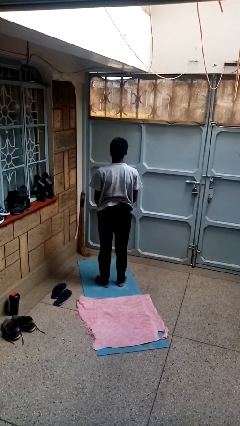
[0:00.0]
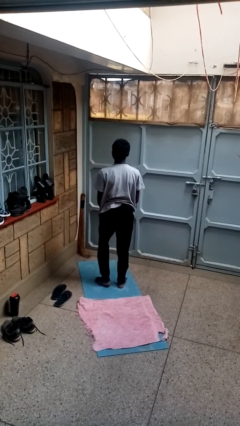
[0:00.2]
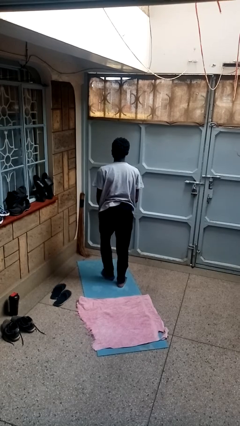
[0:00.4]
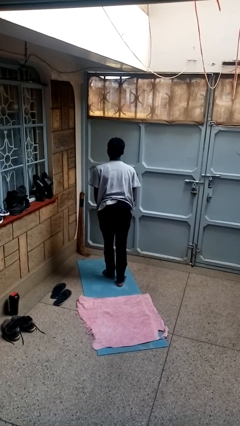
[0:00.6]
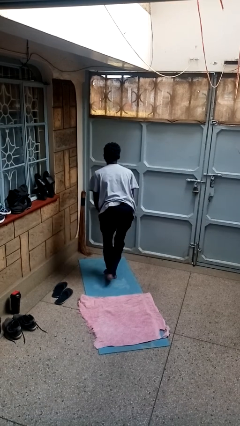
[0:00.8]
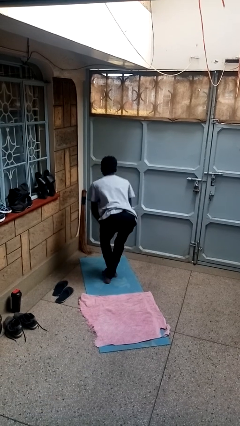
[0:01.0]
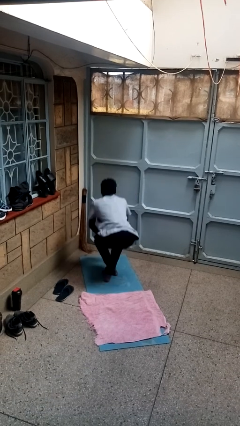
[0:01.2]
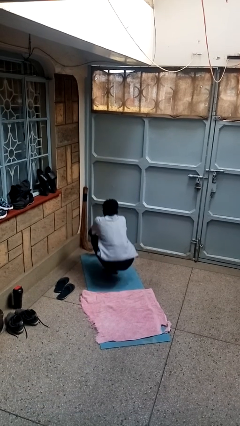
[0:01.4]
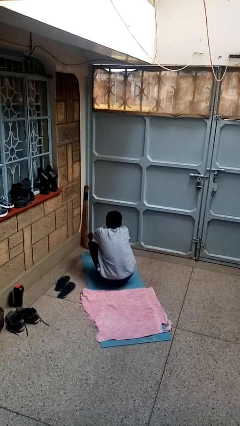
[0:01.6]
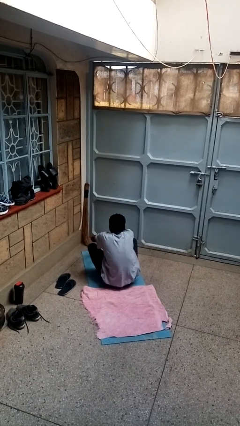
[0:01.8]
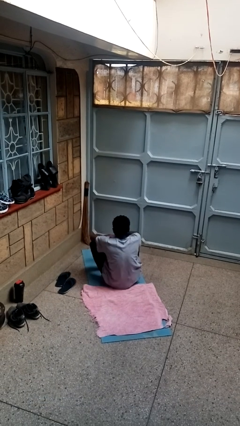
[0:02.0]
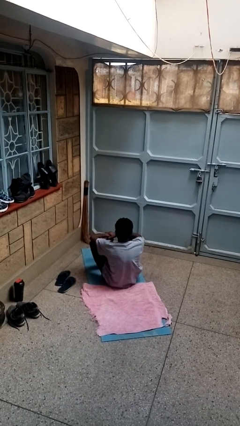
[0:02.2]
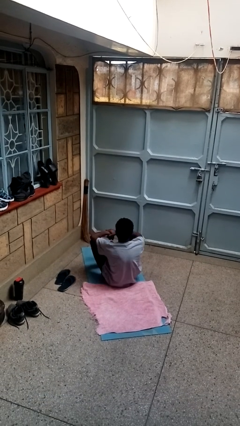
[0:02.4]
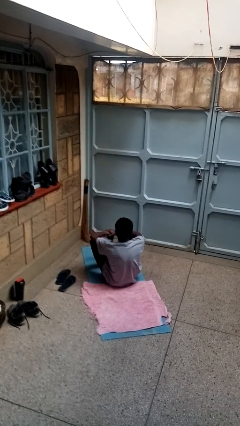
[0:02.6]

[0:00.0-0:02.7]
person sits crisscross

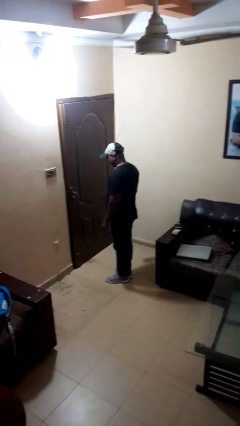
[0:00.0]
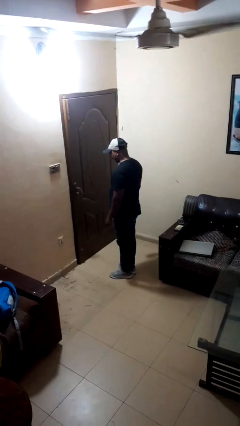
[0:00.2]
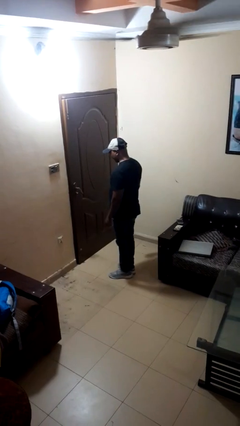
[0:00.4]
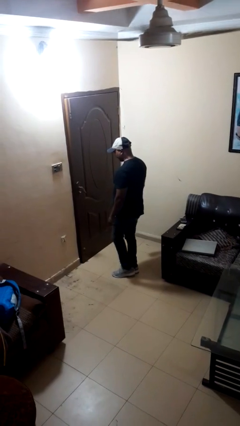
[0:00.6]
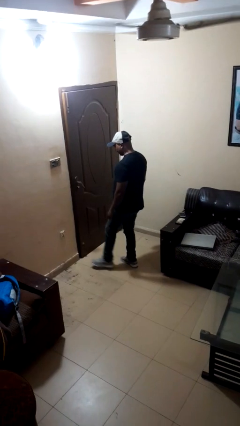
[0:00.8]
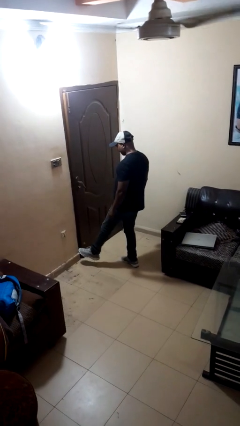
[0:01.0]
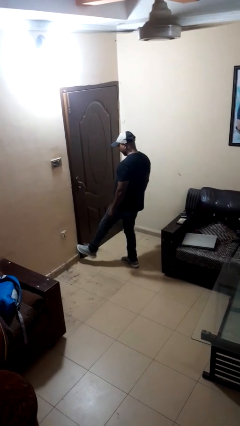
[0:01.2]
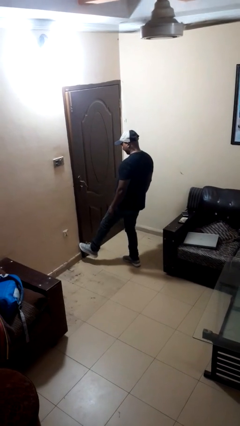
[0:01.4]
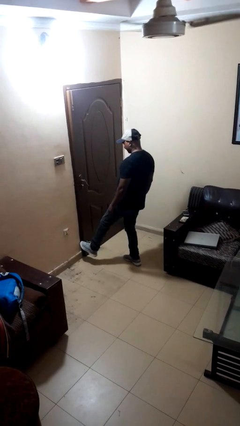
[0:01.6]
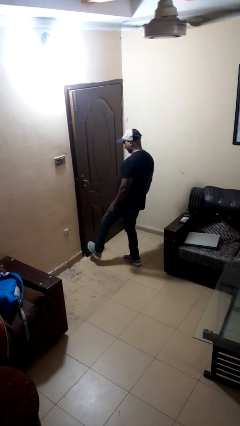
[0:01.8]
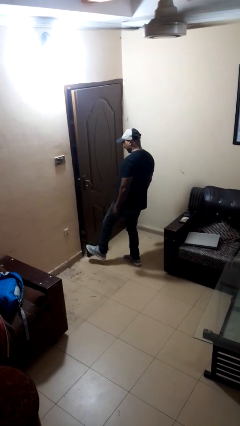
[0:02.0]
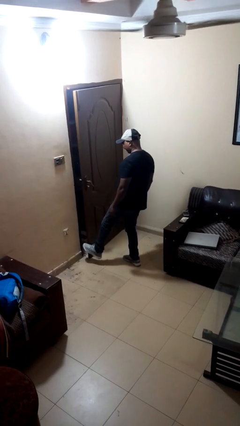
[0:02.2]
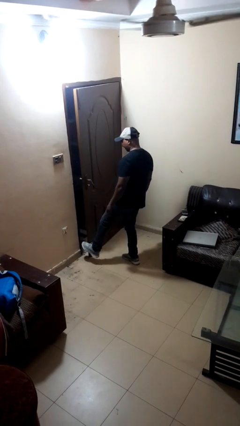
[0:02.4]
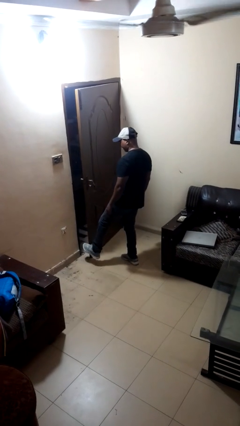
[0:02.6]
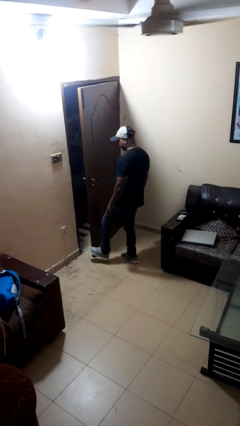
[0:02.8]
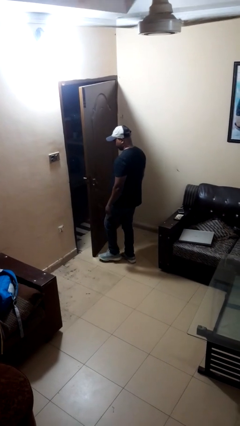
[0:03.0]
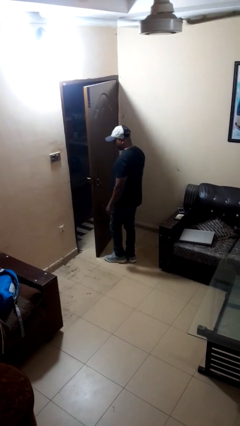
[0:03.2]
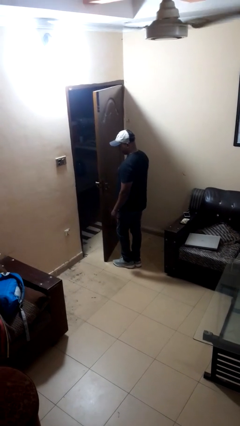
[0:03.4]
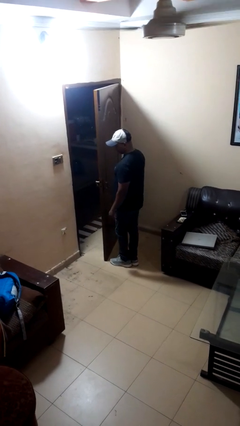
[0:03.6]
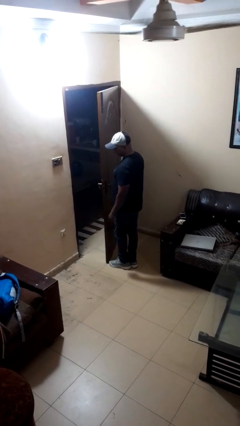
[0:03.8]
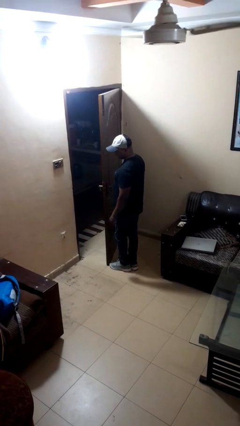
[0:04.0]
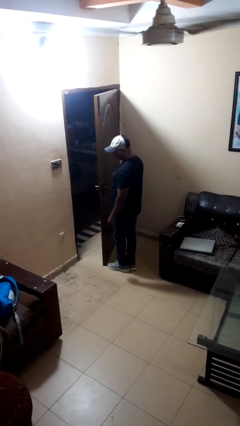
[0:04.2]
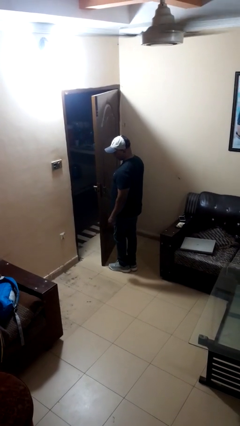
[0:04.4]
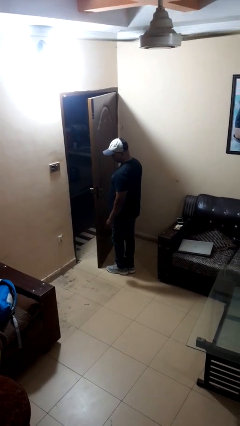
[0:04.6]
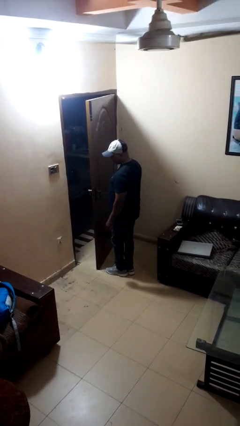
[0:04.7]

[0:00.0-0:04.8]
person opens facility door

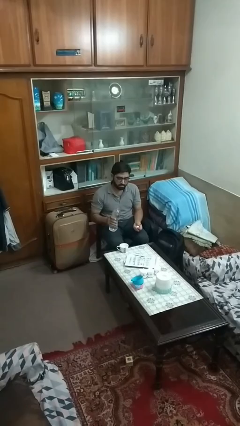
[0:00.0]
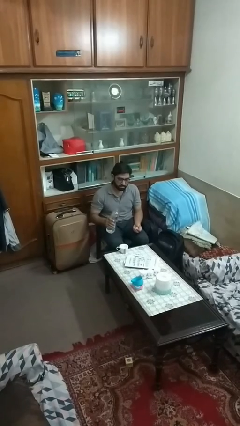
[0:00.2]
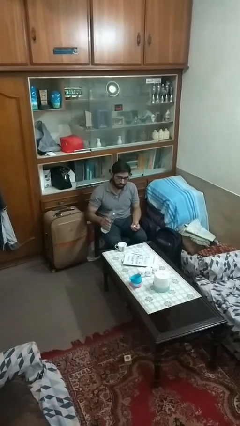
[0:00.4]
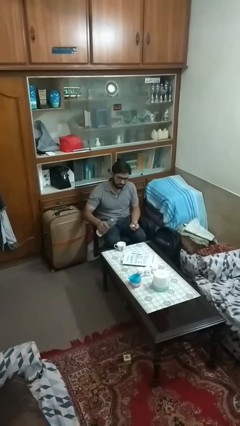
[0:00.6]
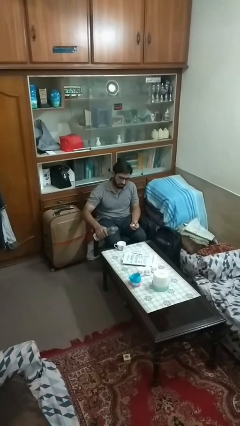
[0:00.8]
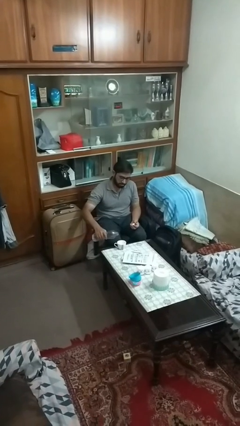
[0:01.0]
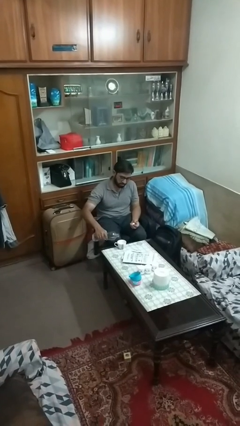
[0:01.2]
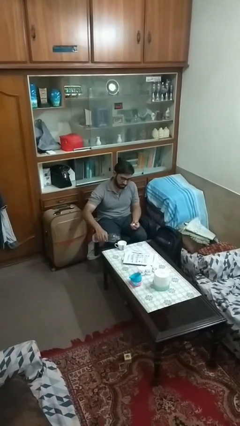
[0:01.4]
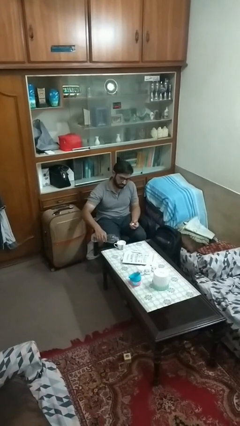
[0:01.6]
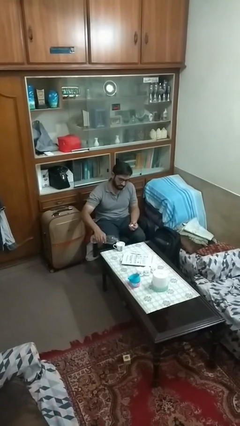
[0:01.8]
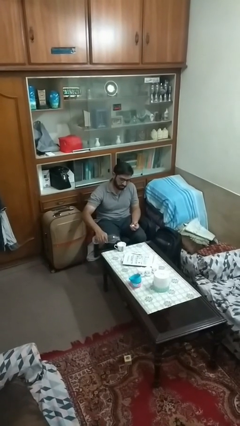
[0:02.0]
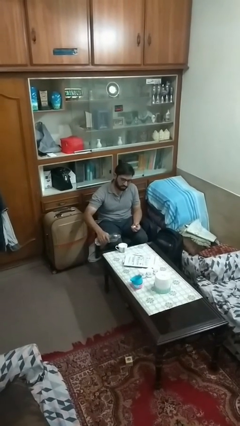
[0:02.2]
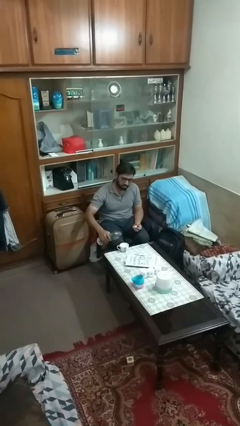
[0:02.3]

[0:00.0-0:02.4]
person pours liquid into cup

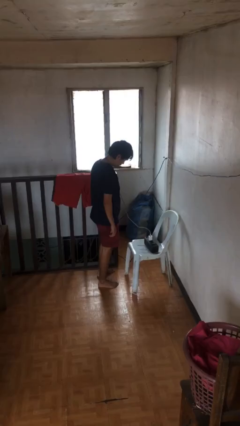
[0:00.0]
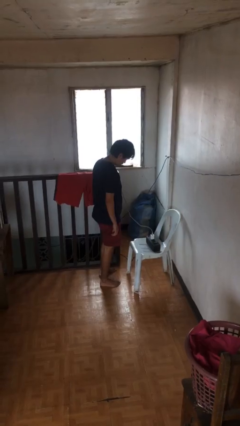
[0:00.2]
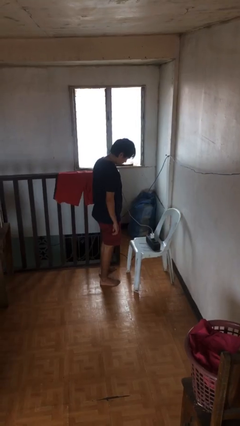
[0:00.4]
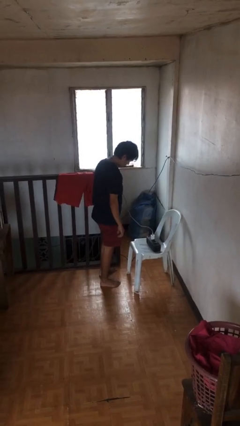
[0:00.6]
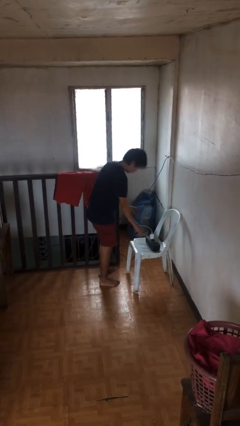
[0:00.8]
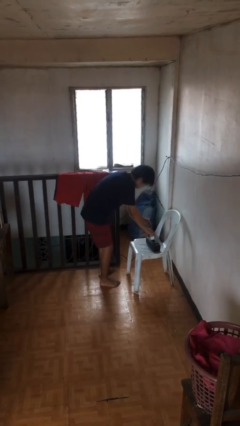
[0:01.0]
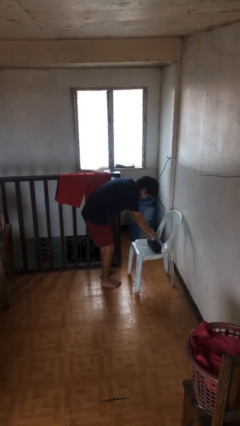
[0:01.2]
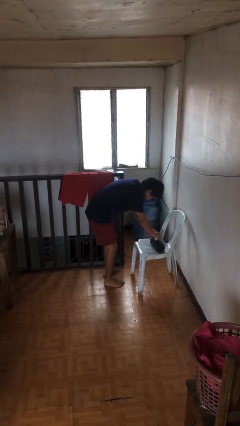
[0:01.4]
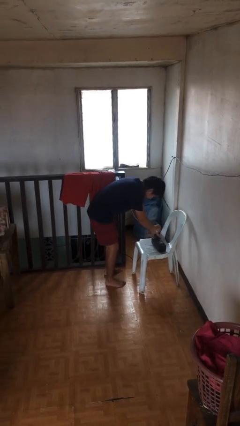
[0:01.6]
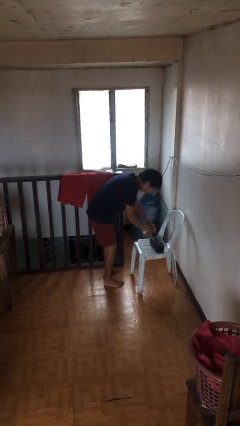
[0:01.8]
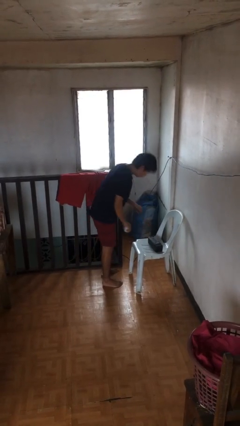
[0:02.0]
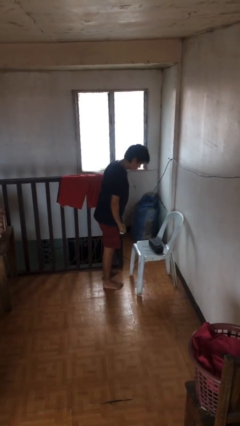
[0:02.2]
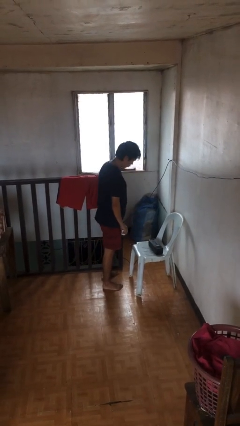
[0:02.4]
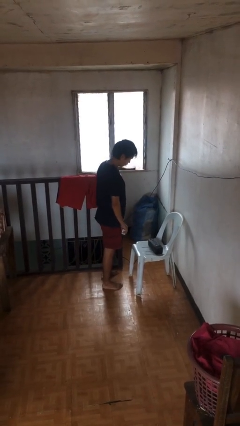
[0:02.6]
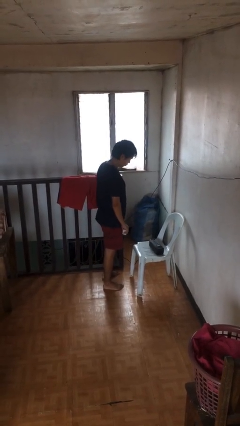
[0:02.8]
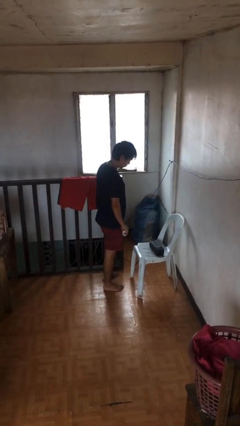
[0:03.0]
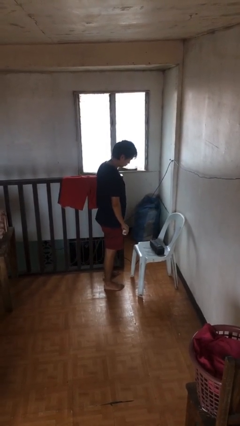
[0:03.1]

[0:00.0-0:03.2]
person unplugs from electrical socket

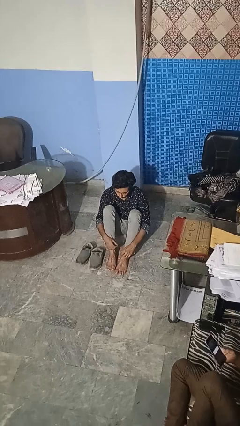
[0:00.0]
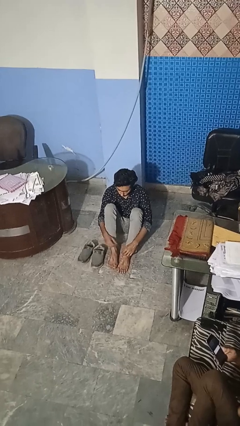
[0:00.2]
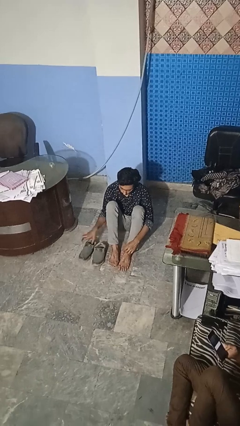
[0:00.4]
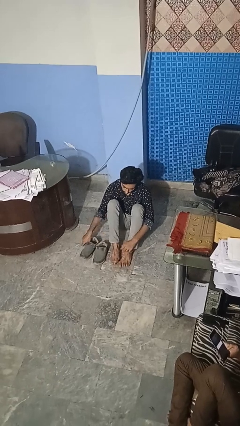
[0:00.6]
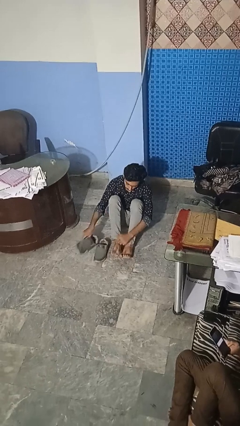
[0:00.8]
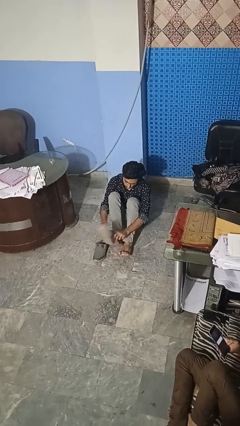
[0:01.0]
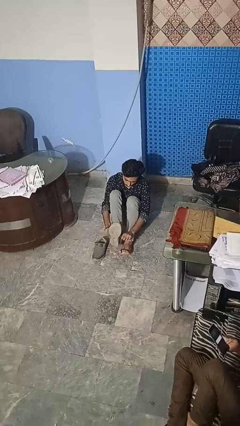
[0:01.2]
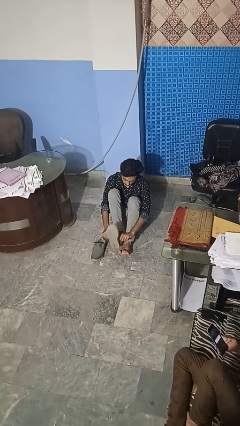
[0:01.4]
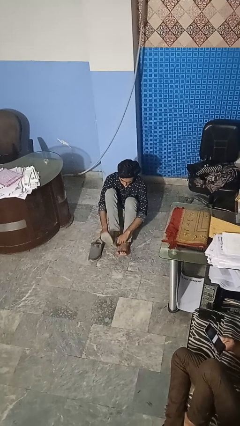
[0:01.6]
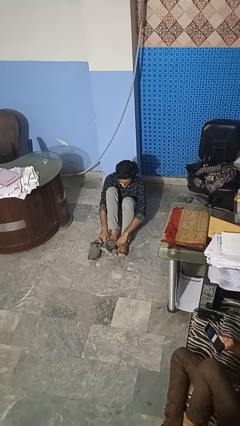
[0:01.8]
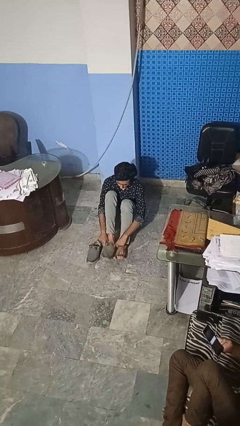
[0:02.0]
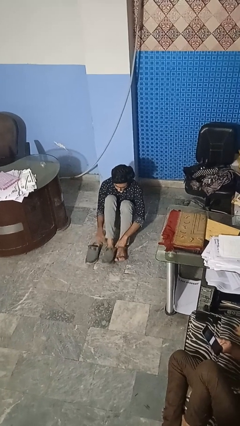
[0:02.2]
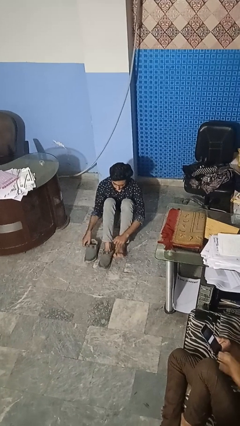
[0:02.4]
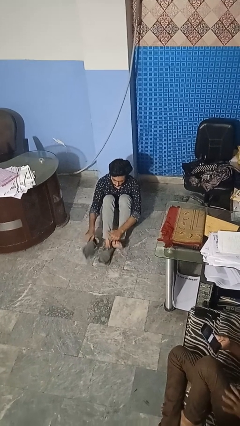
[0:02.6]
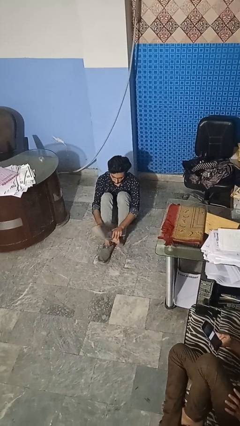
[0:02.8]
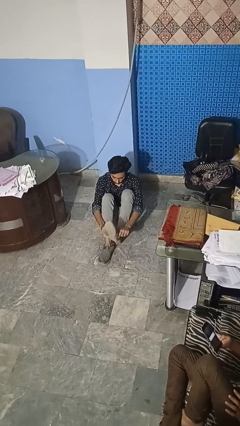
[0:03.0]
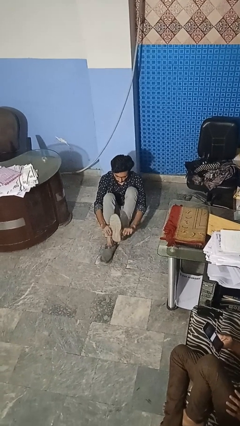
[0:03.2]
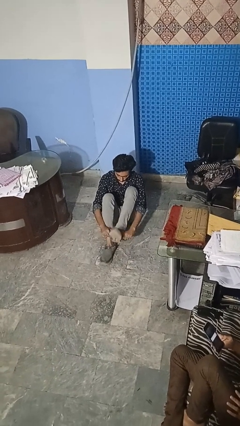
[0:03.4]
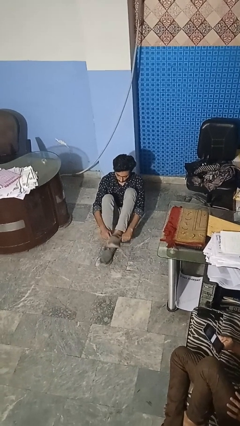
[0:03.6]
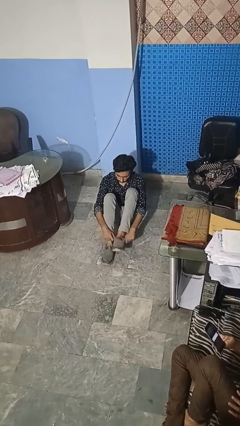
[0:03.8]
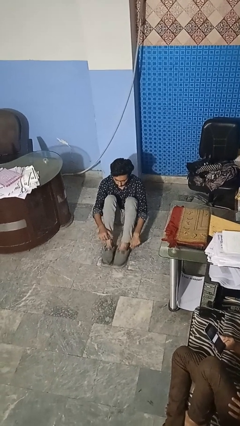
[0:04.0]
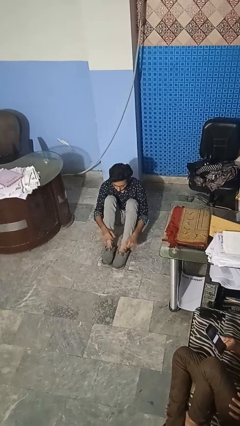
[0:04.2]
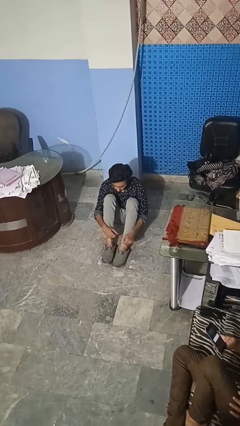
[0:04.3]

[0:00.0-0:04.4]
person puts on shoes
